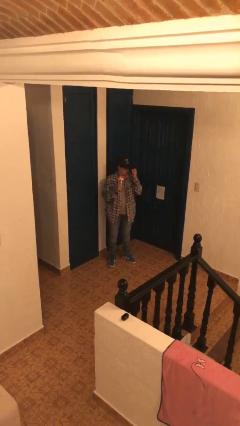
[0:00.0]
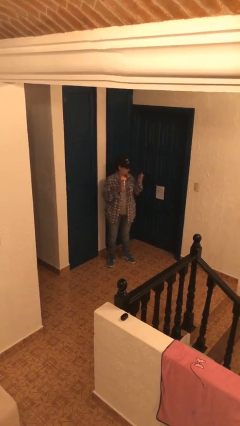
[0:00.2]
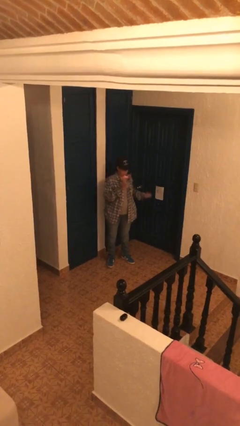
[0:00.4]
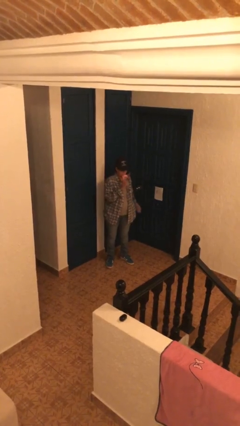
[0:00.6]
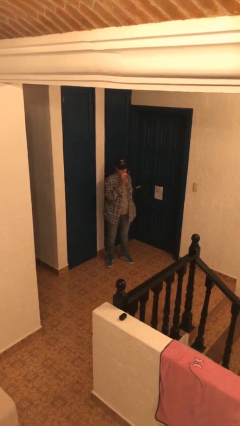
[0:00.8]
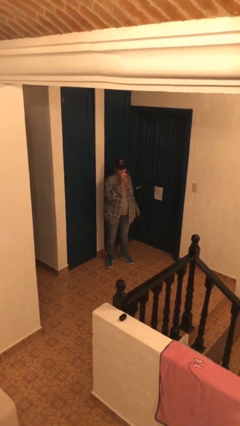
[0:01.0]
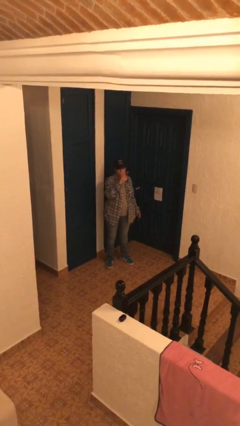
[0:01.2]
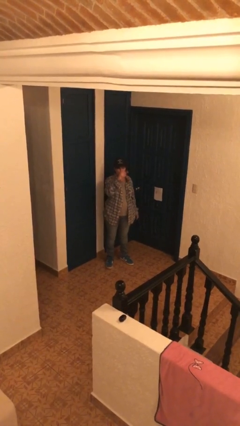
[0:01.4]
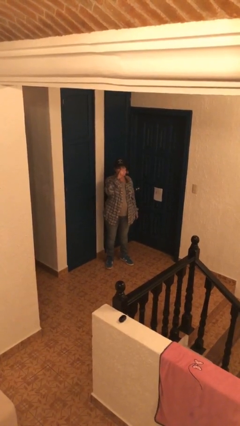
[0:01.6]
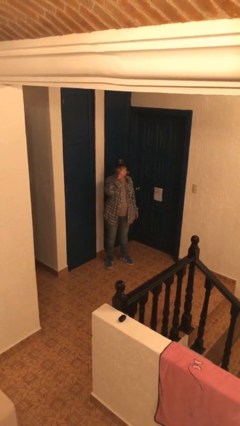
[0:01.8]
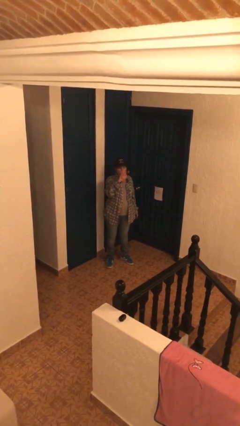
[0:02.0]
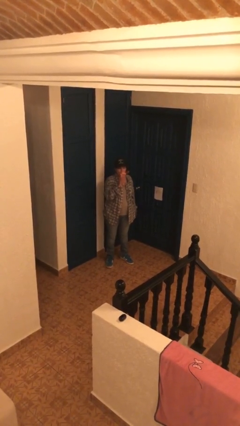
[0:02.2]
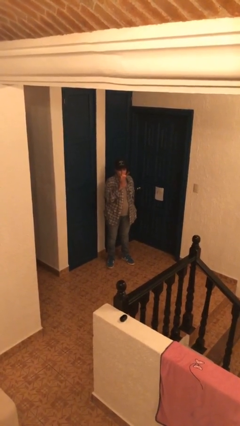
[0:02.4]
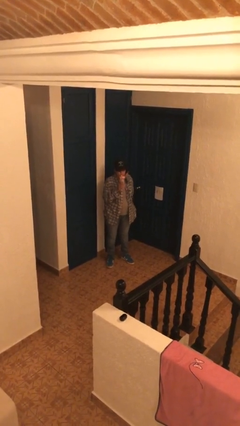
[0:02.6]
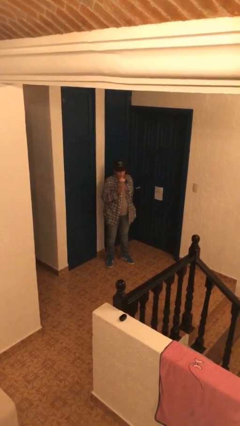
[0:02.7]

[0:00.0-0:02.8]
person drinks from bottle

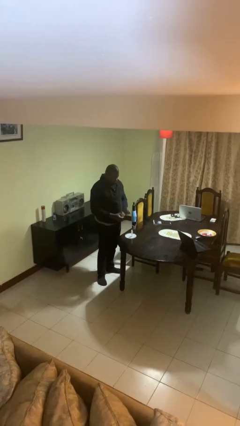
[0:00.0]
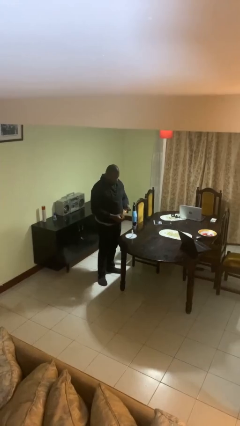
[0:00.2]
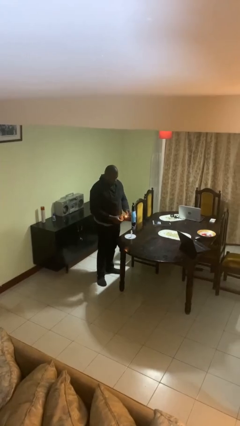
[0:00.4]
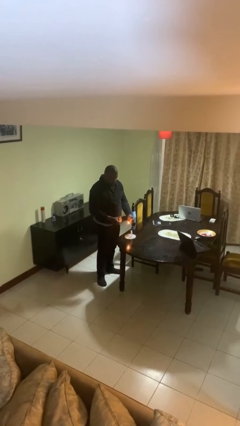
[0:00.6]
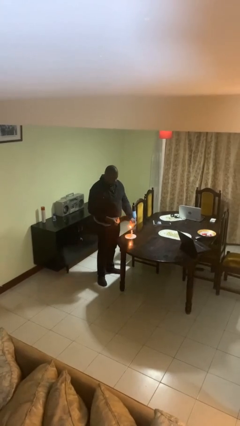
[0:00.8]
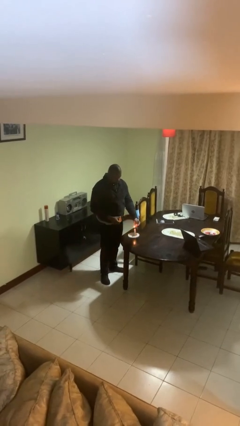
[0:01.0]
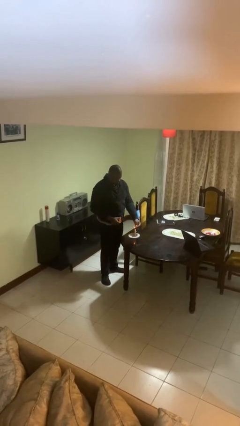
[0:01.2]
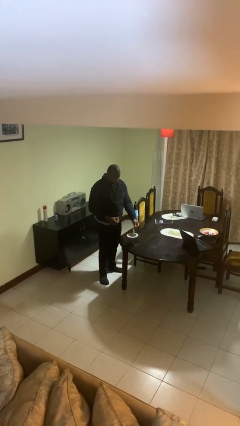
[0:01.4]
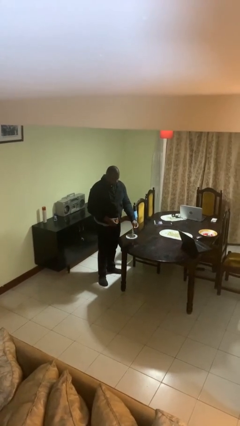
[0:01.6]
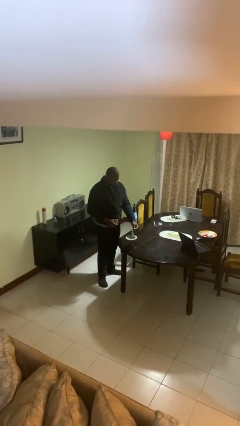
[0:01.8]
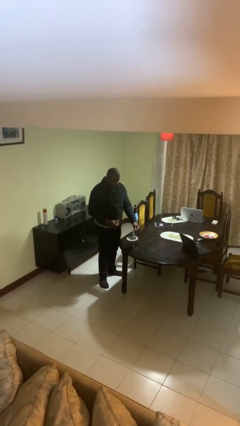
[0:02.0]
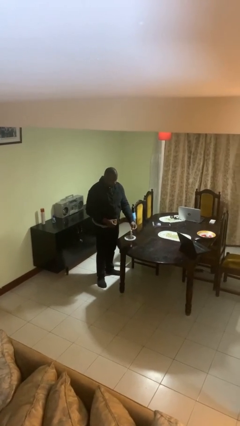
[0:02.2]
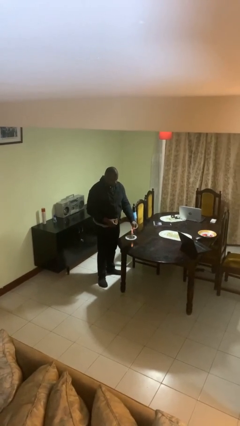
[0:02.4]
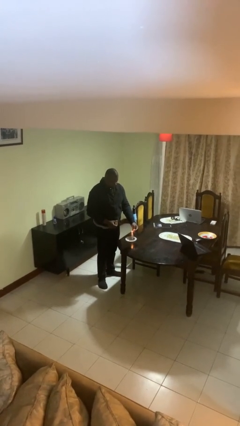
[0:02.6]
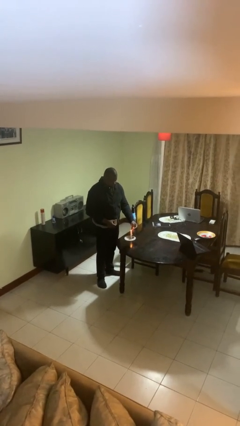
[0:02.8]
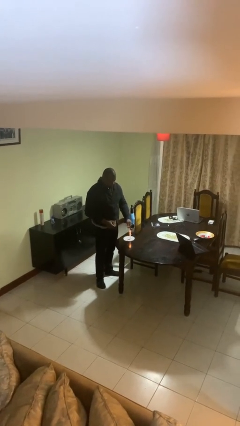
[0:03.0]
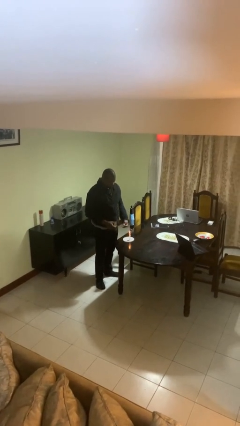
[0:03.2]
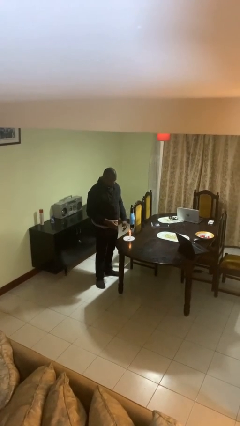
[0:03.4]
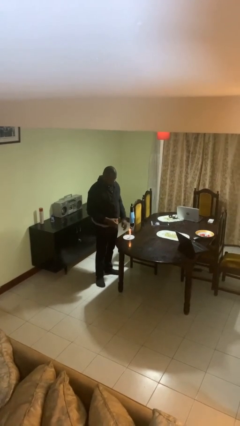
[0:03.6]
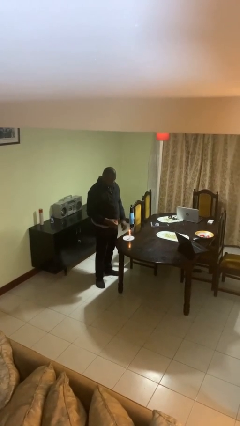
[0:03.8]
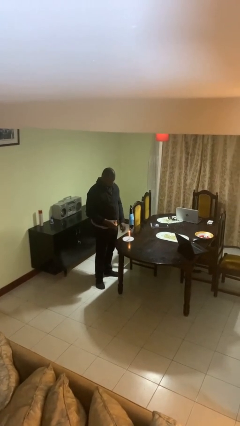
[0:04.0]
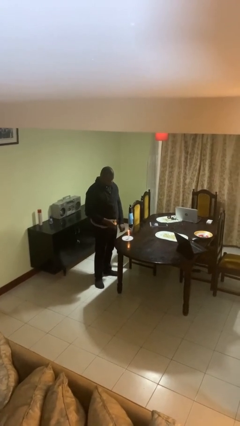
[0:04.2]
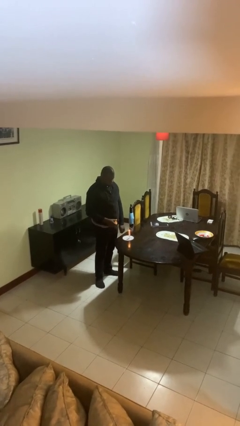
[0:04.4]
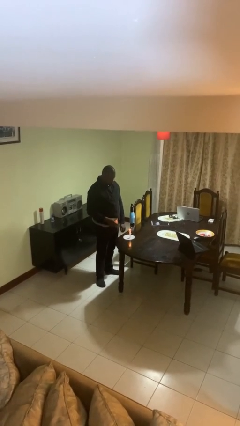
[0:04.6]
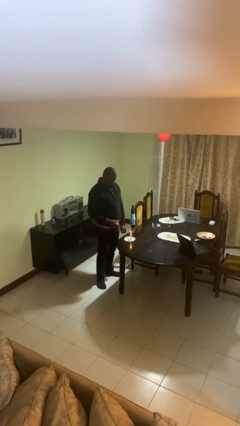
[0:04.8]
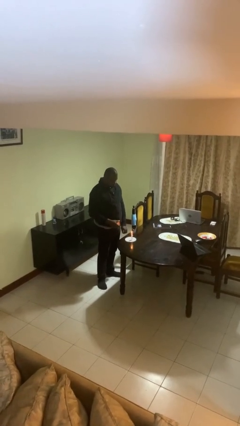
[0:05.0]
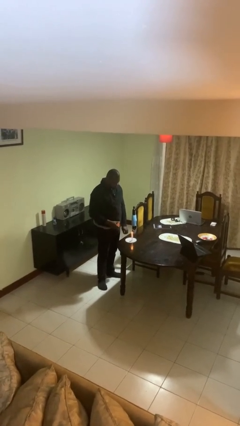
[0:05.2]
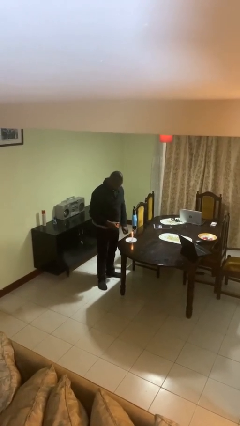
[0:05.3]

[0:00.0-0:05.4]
person lights candle

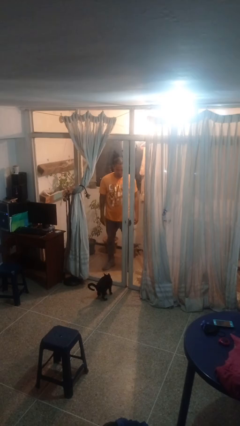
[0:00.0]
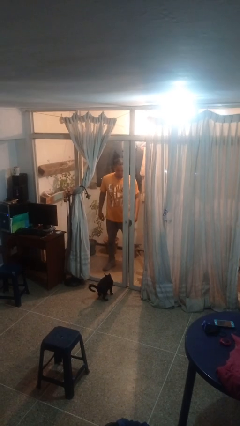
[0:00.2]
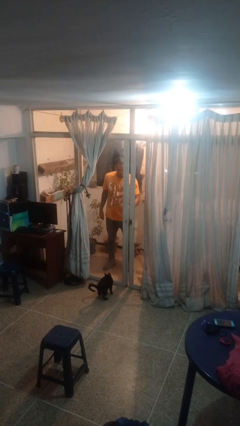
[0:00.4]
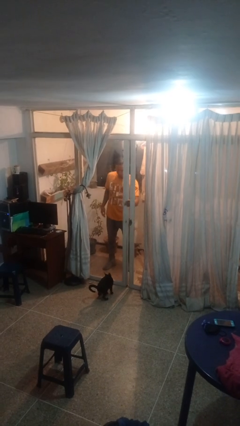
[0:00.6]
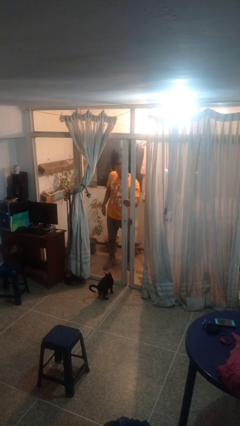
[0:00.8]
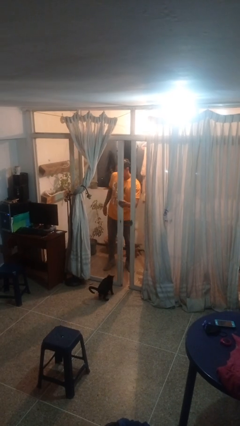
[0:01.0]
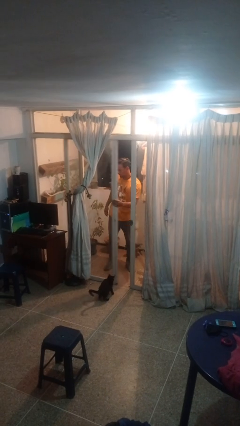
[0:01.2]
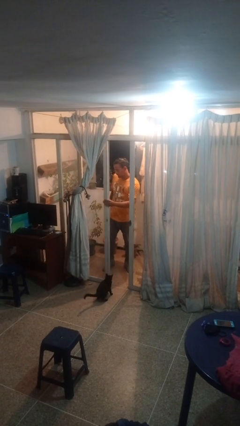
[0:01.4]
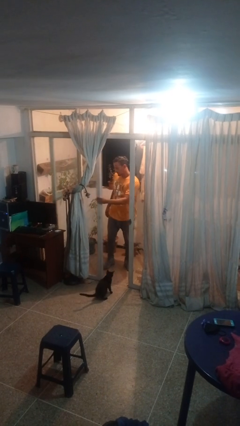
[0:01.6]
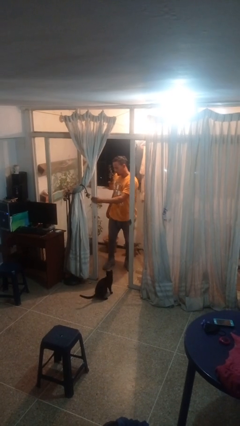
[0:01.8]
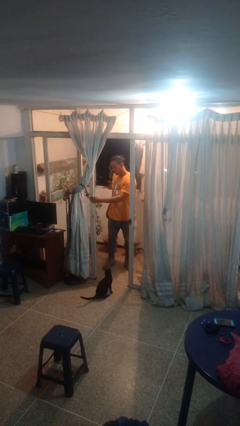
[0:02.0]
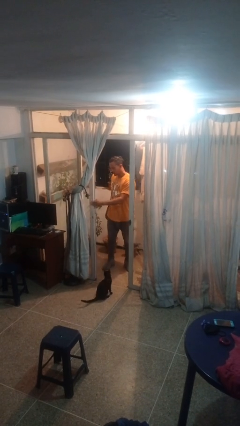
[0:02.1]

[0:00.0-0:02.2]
person opens sliding door

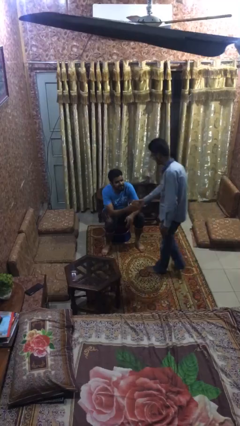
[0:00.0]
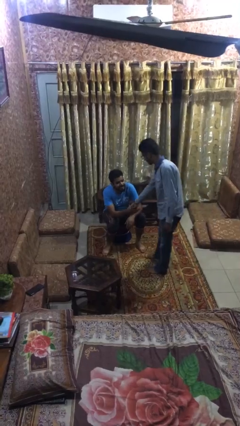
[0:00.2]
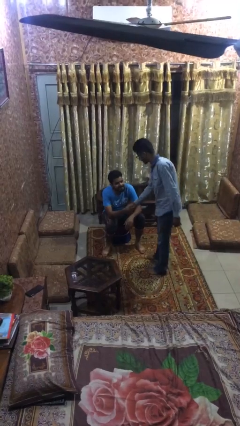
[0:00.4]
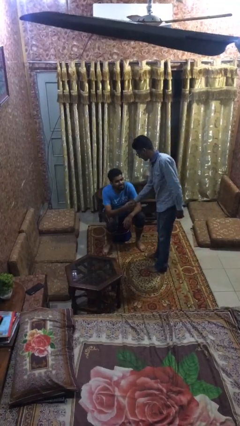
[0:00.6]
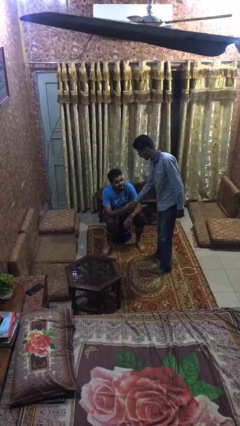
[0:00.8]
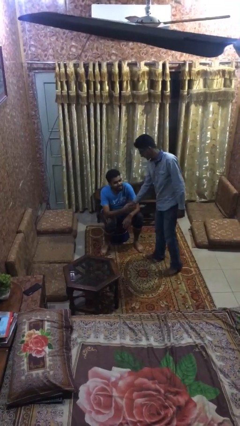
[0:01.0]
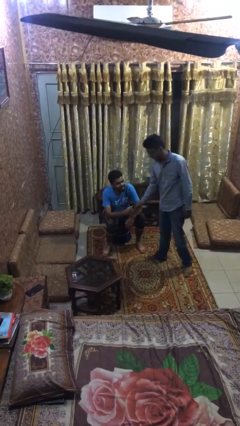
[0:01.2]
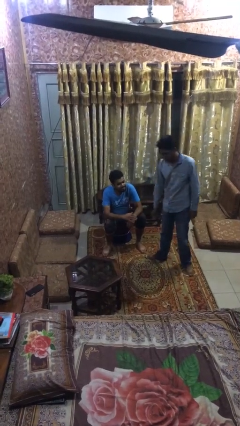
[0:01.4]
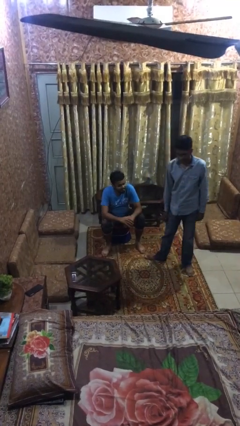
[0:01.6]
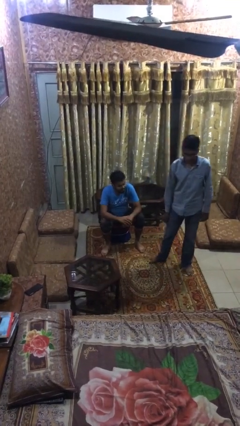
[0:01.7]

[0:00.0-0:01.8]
person shakes hand

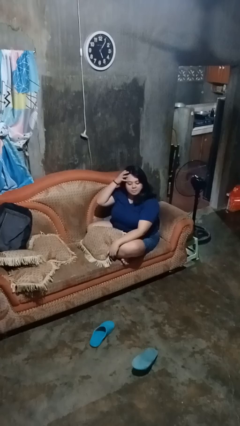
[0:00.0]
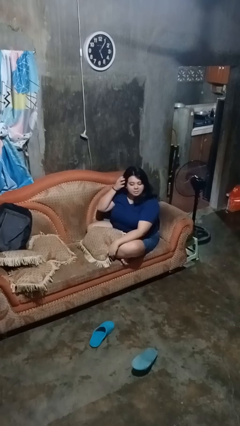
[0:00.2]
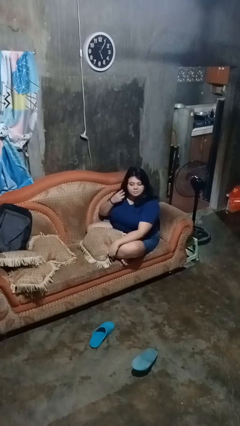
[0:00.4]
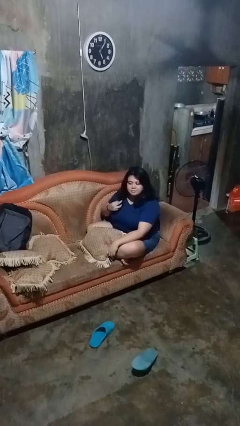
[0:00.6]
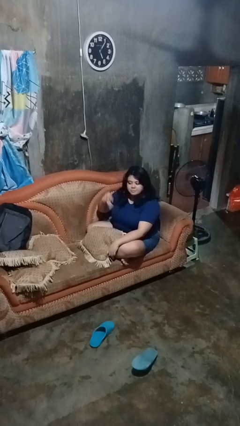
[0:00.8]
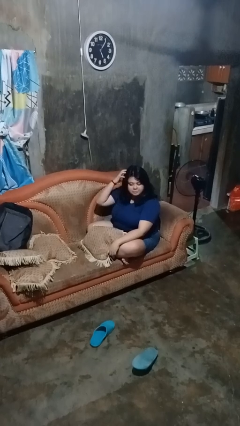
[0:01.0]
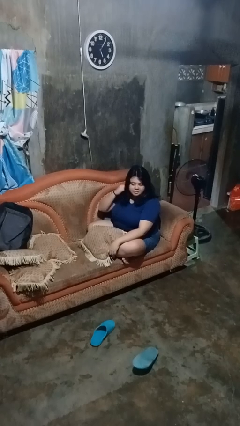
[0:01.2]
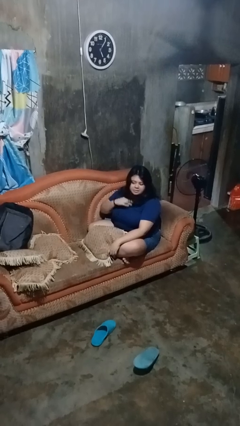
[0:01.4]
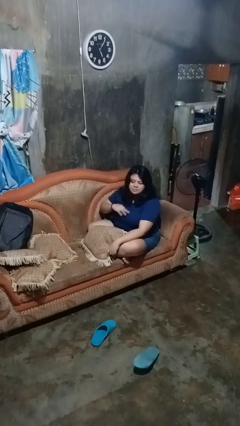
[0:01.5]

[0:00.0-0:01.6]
person strokes hair

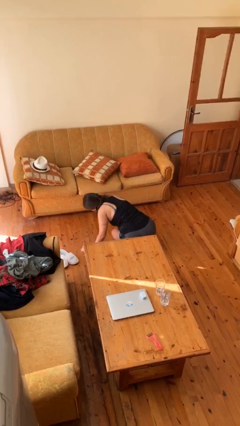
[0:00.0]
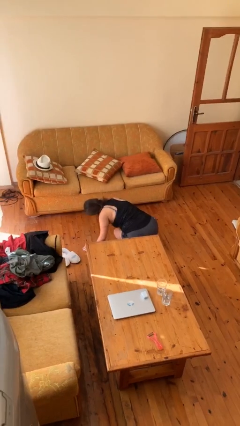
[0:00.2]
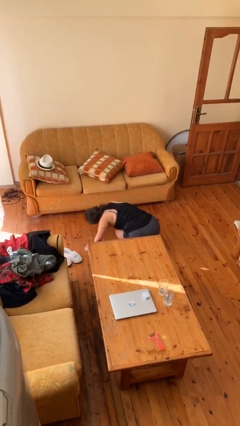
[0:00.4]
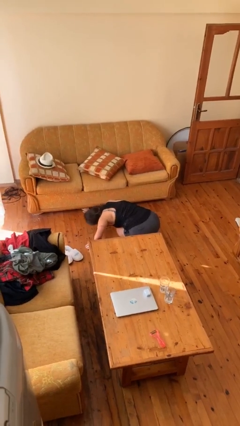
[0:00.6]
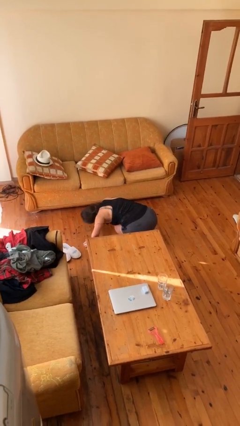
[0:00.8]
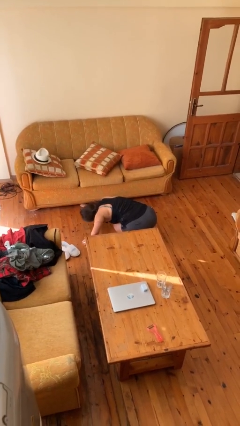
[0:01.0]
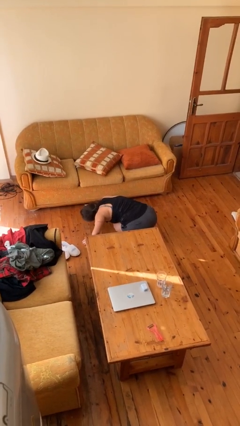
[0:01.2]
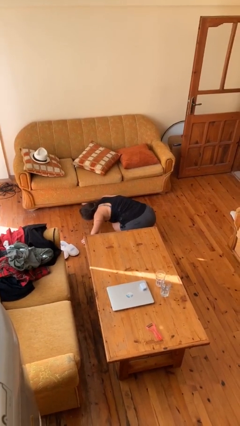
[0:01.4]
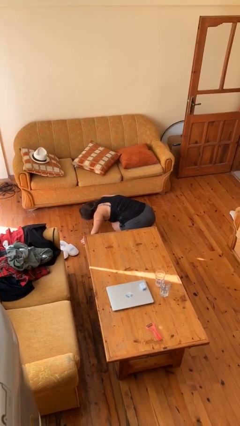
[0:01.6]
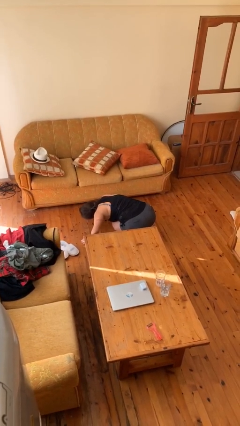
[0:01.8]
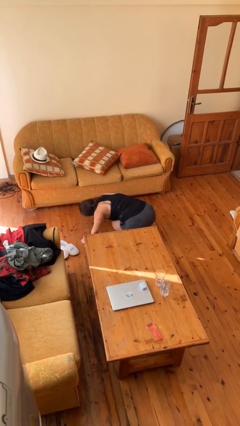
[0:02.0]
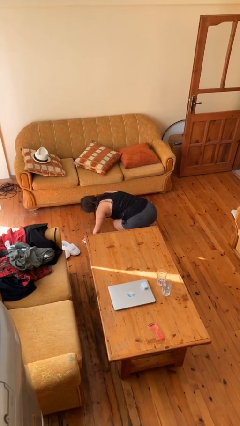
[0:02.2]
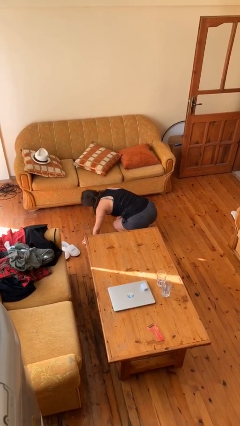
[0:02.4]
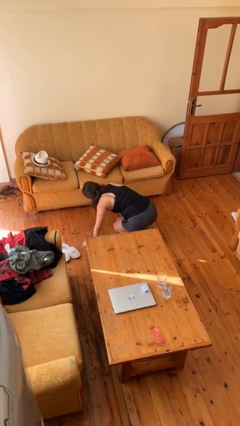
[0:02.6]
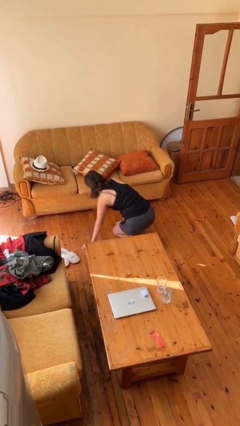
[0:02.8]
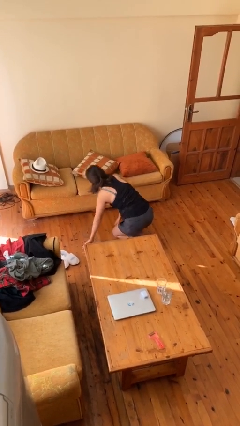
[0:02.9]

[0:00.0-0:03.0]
person searches under couch

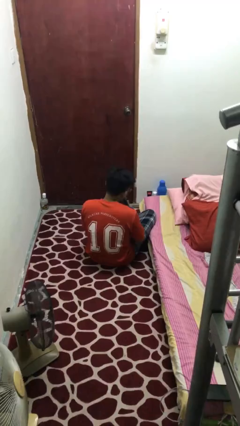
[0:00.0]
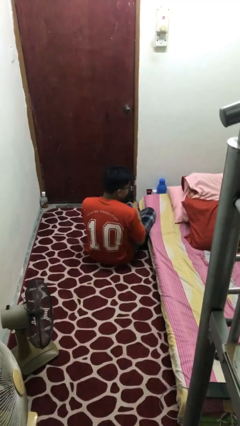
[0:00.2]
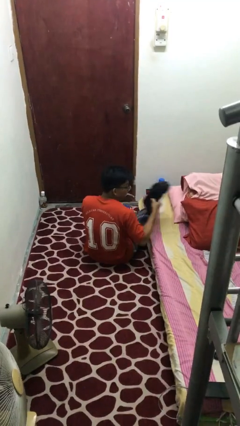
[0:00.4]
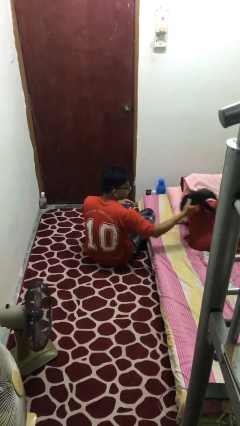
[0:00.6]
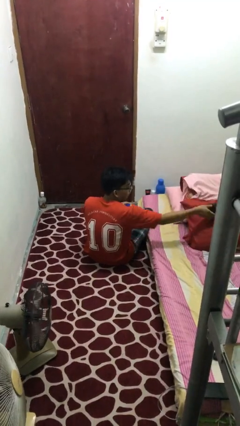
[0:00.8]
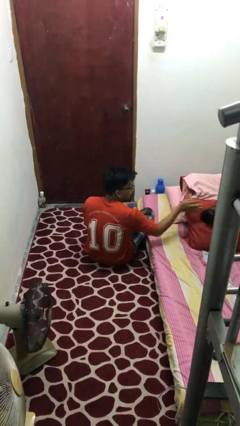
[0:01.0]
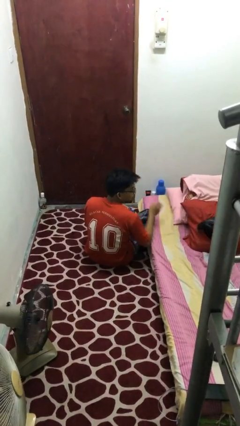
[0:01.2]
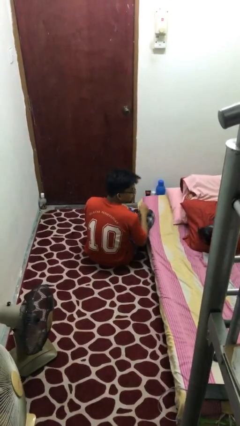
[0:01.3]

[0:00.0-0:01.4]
person puts down object on bed
